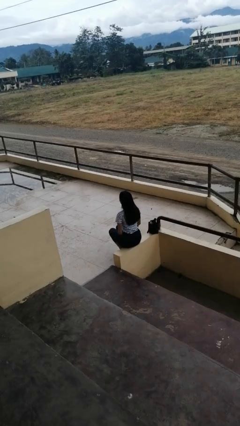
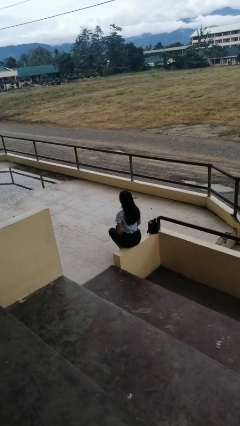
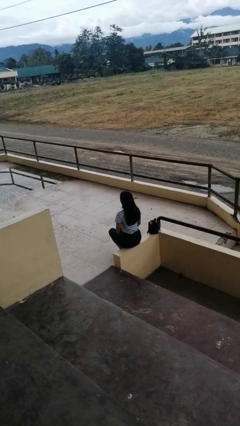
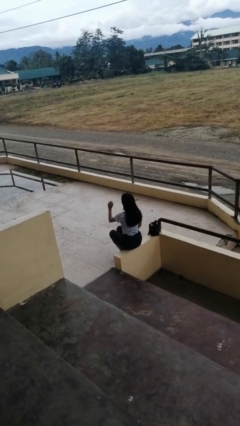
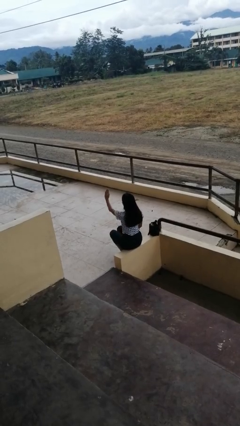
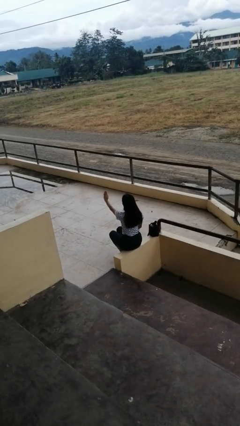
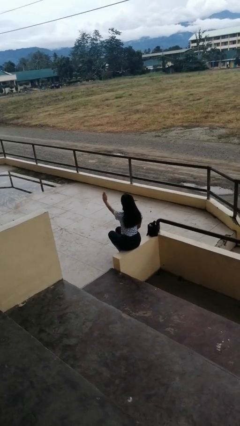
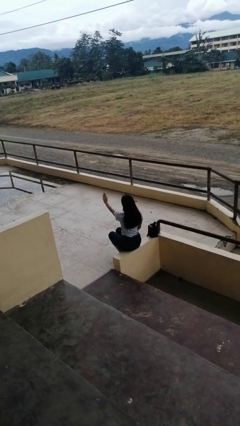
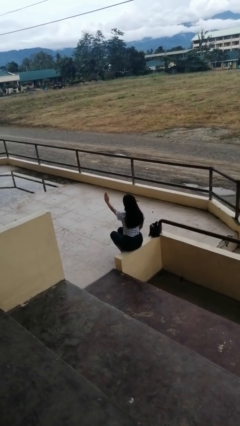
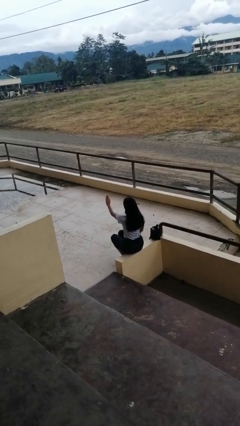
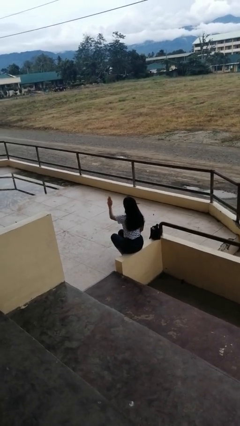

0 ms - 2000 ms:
person gestures stop

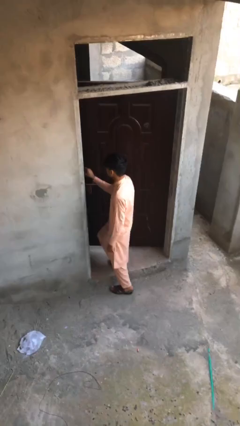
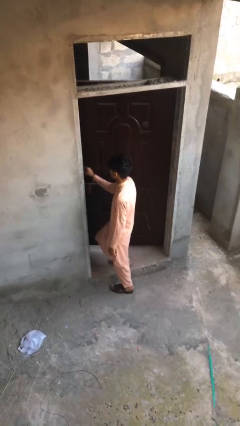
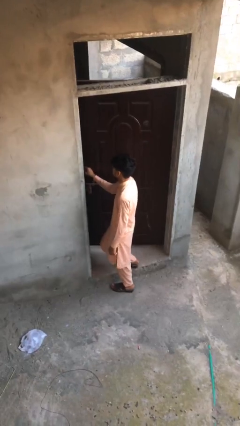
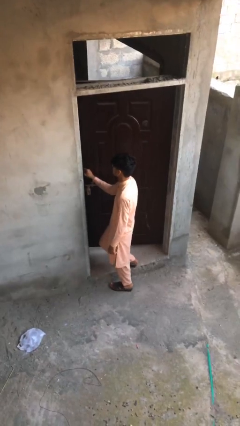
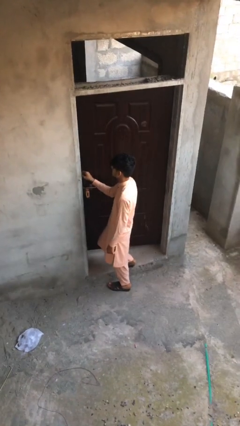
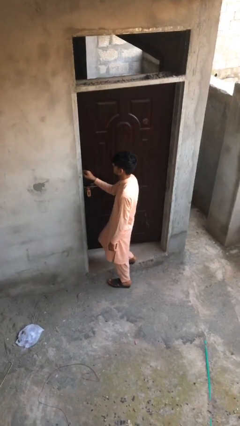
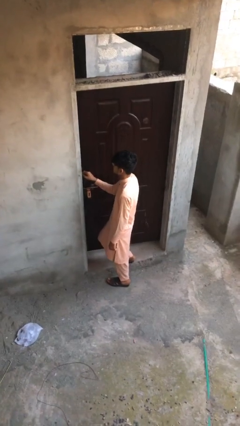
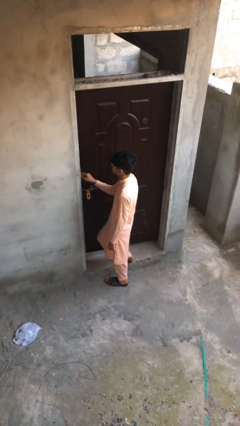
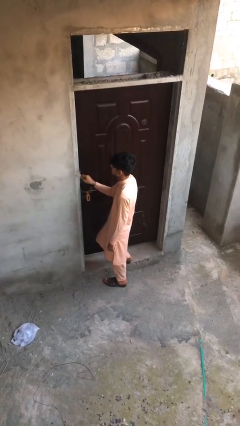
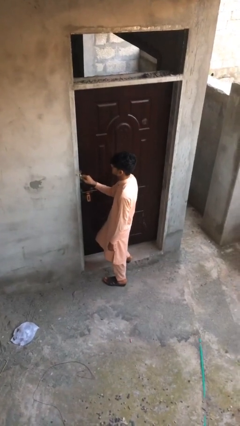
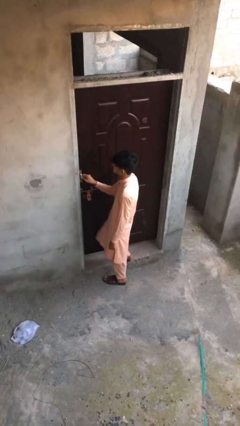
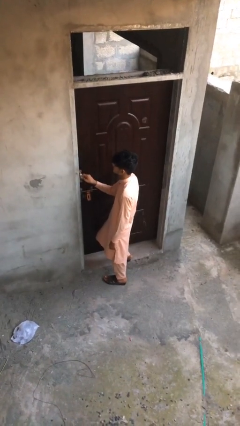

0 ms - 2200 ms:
person closes facility door

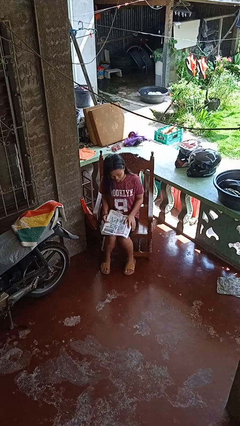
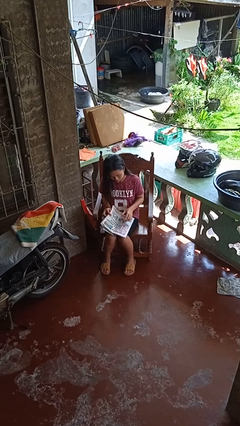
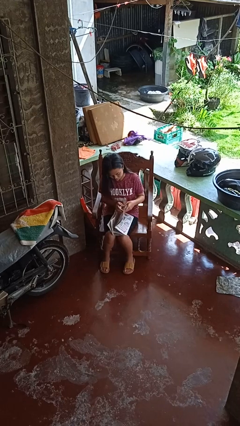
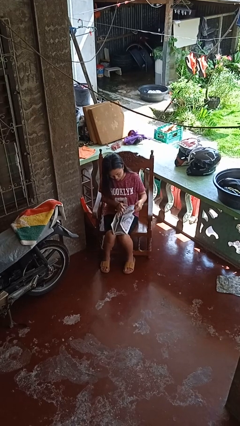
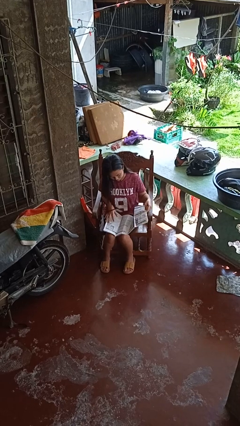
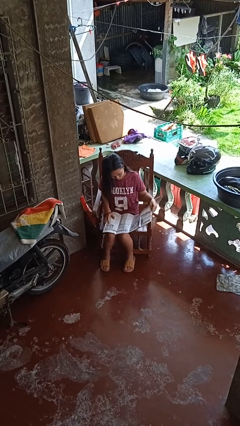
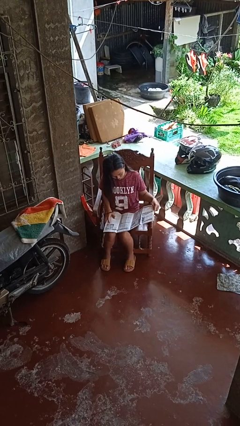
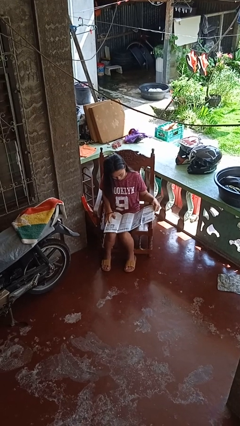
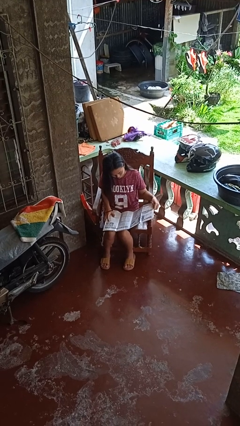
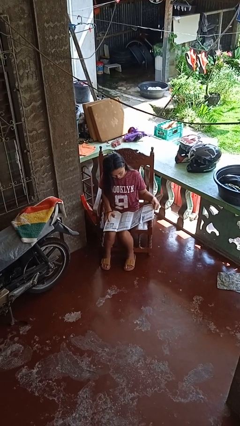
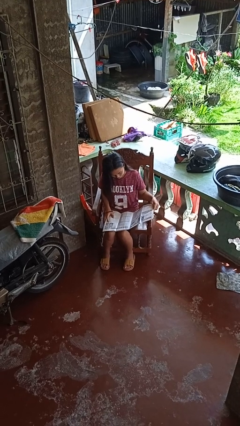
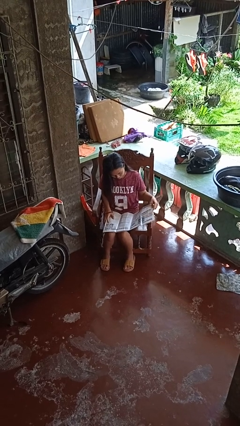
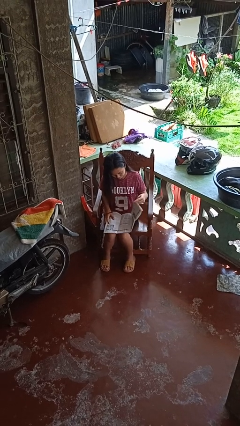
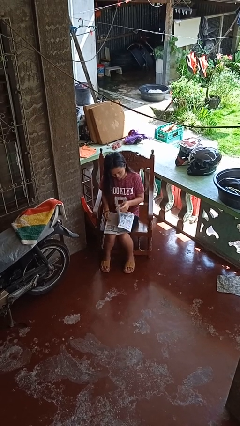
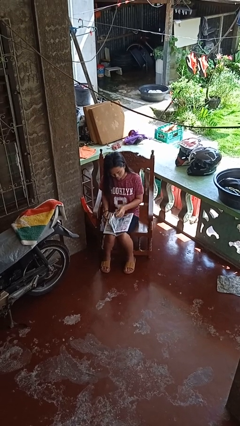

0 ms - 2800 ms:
person reads newspaper

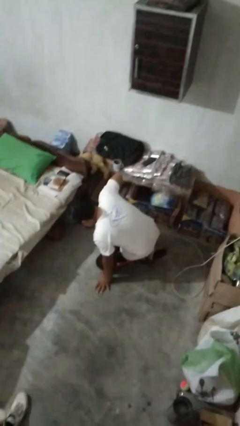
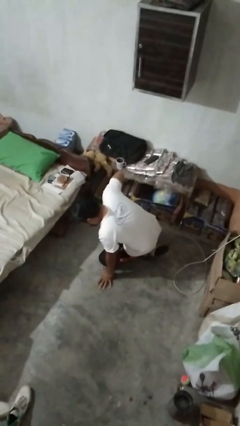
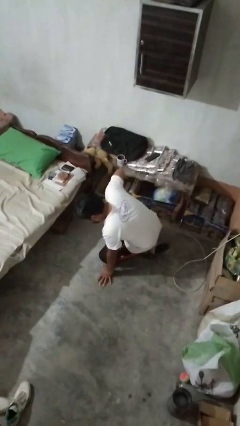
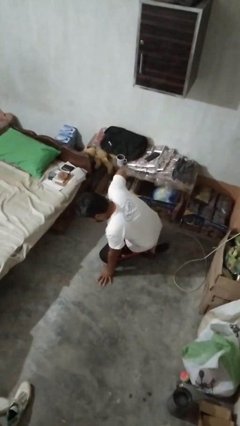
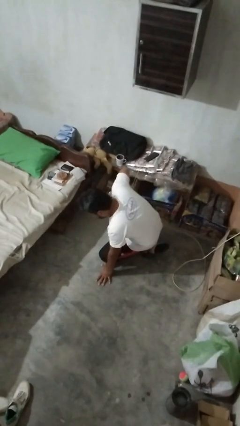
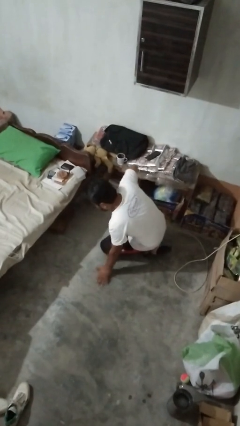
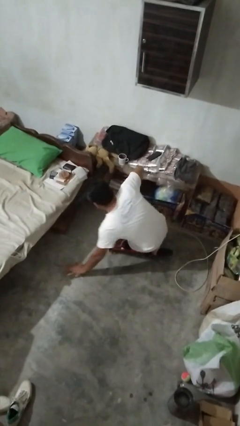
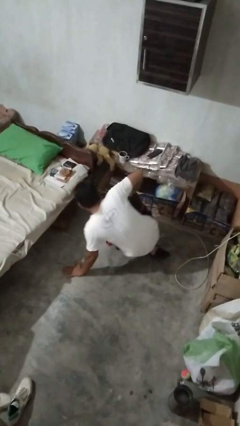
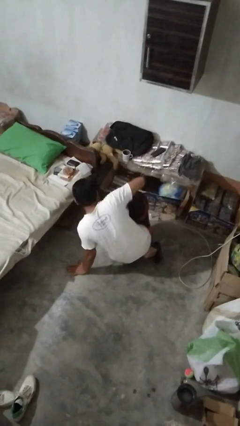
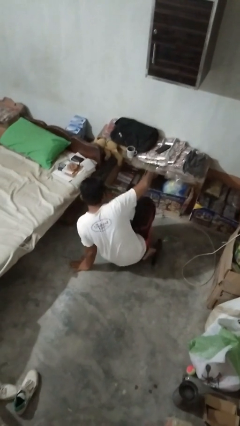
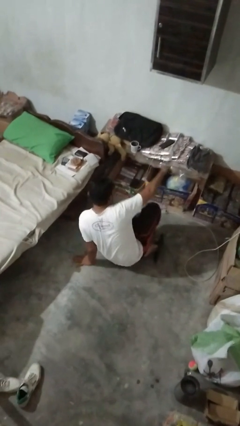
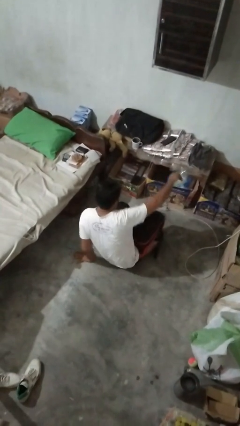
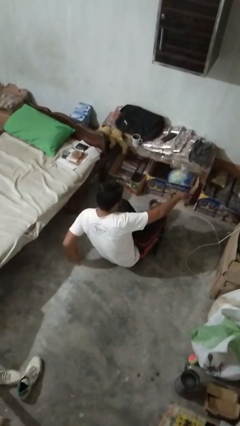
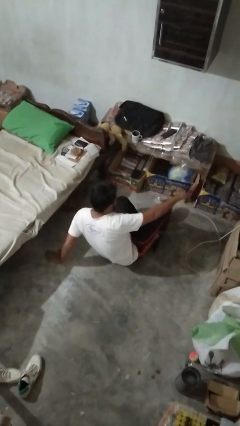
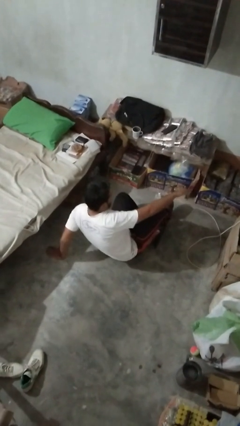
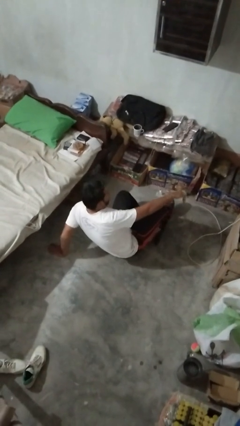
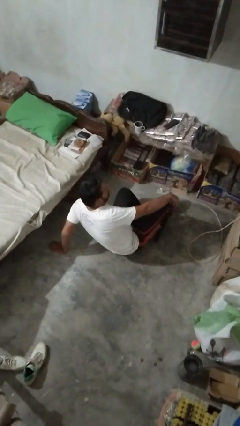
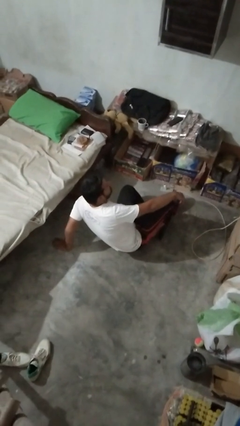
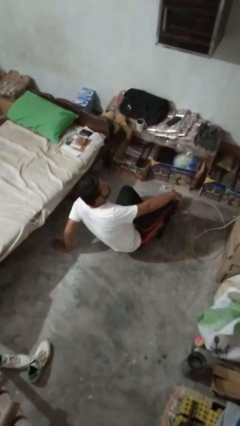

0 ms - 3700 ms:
person lies down on floor

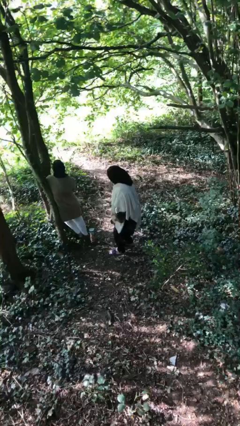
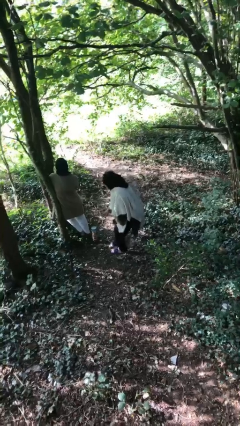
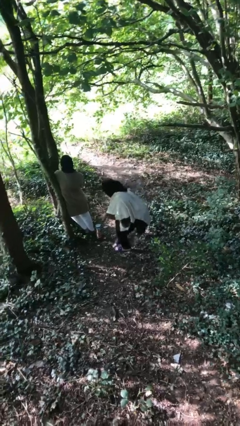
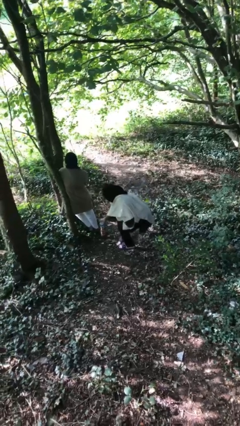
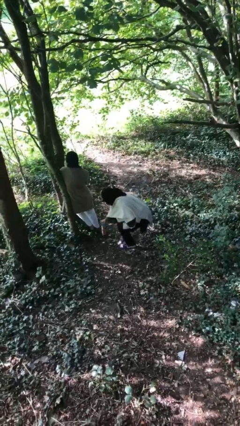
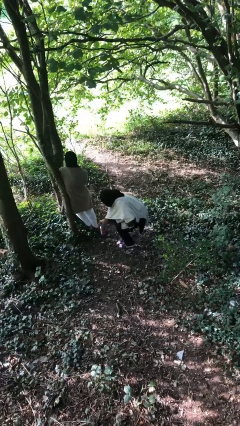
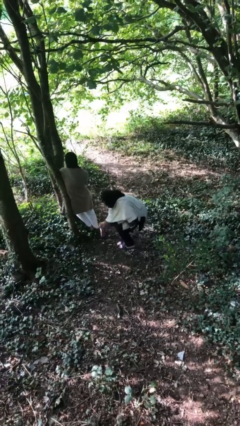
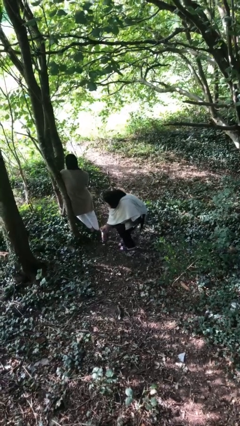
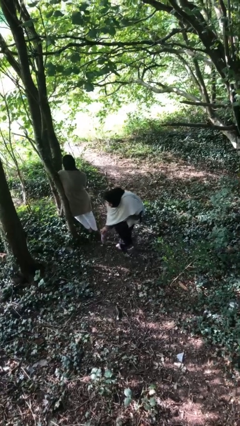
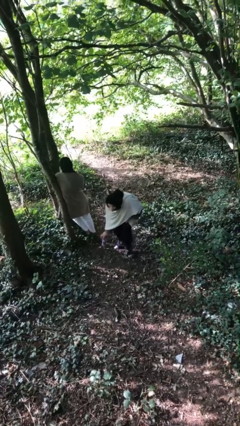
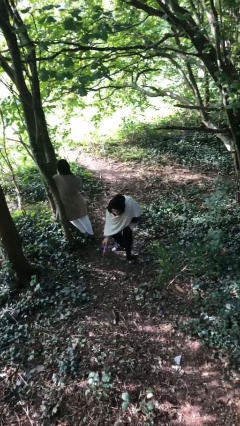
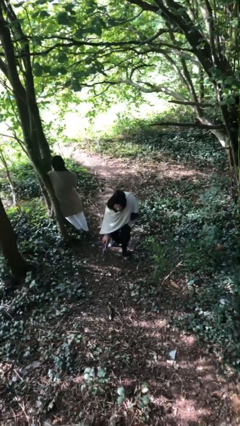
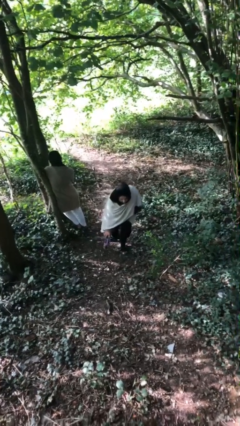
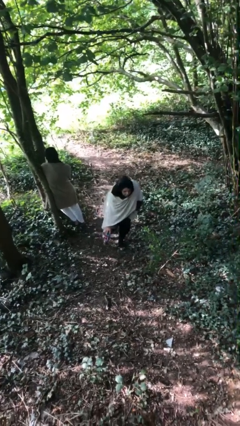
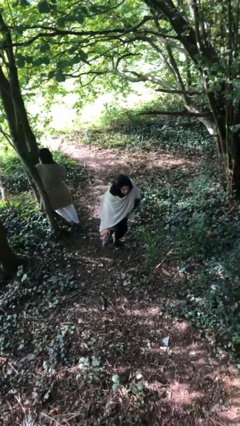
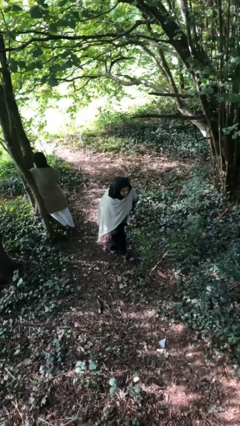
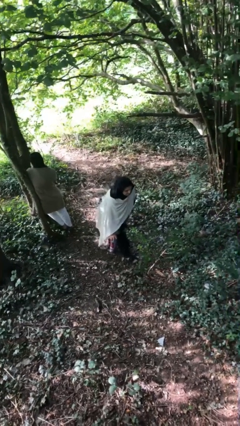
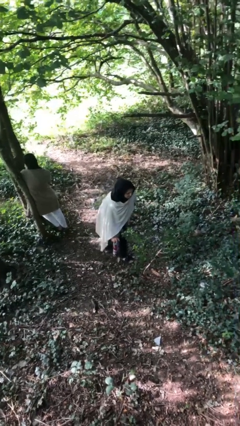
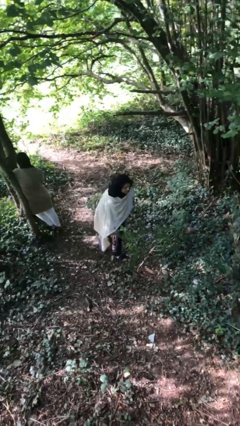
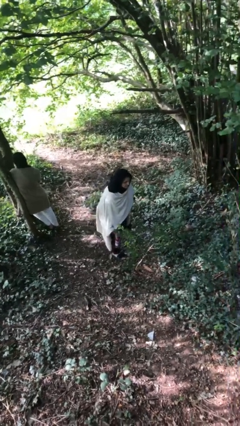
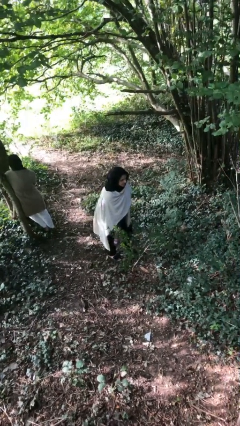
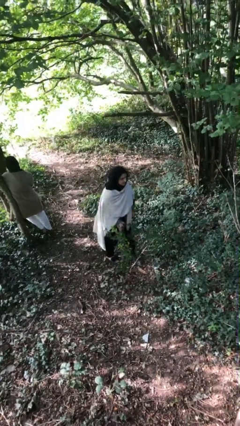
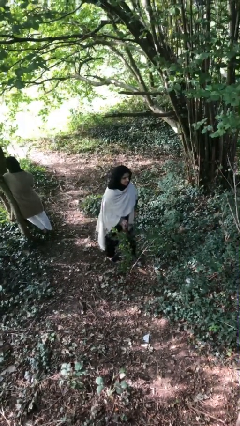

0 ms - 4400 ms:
person steals object from person

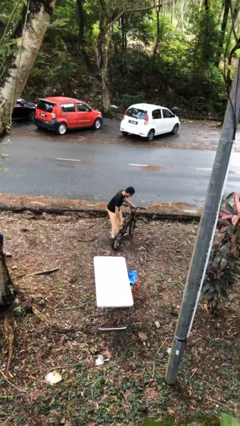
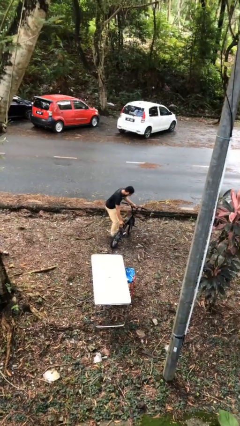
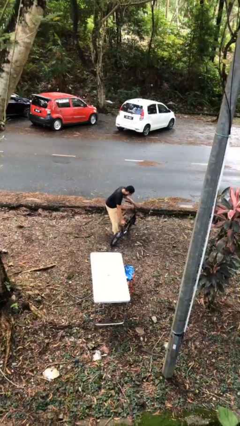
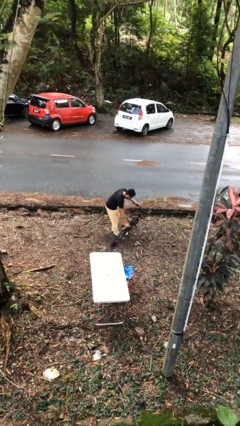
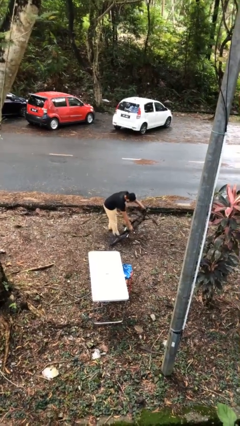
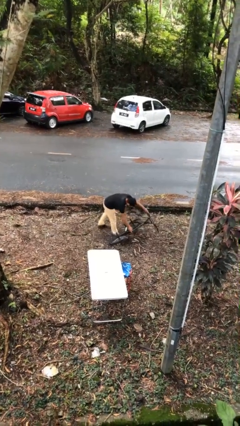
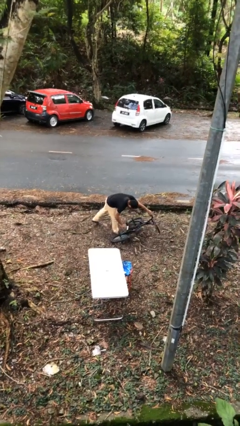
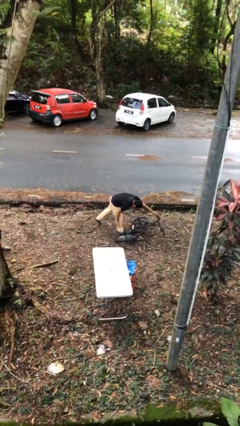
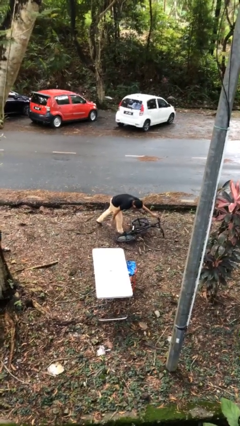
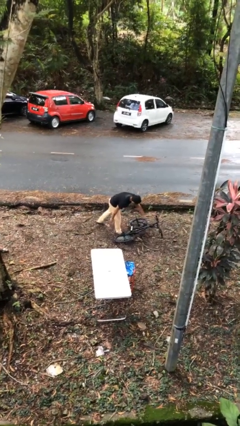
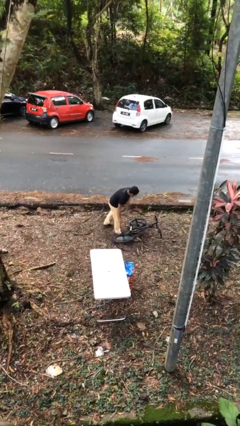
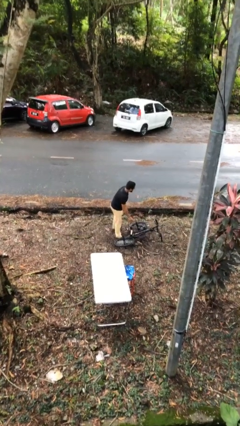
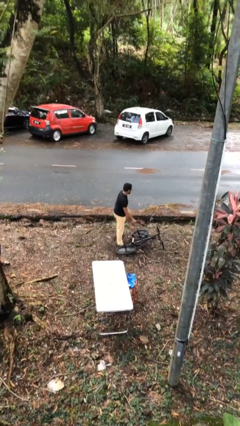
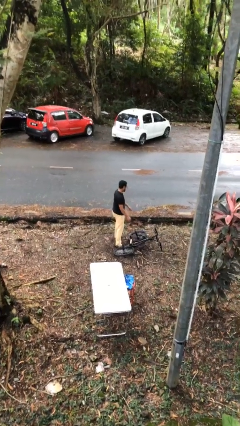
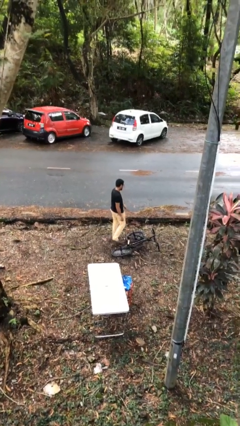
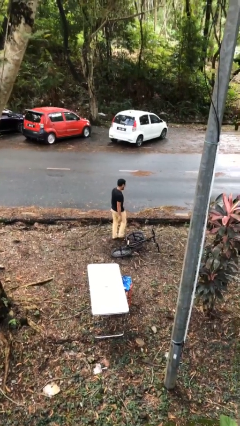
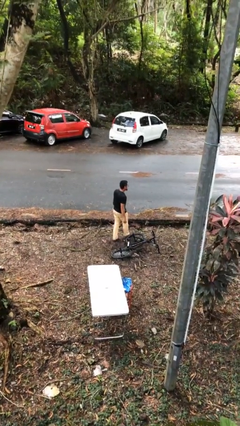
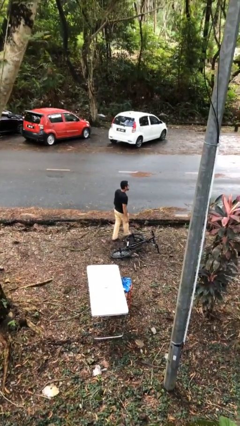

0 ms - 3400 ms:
person puts down object on floor
